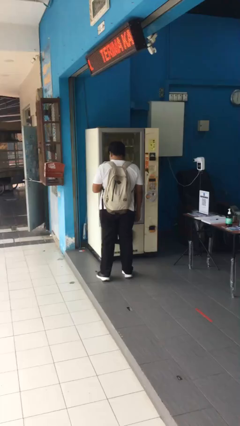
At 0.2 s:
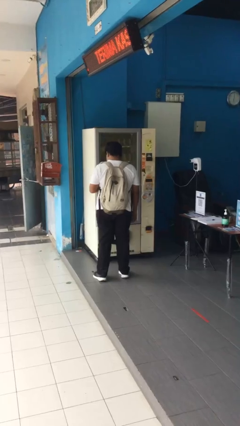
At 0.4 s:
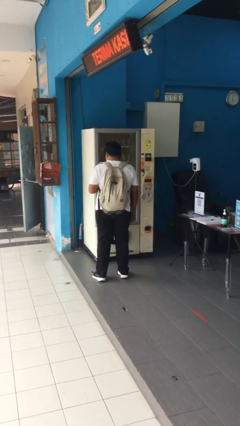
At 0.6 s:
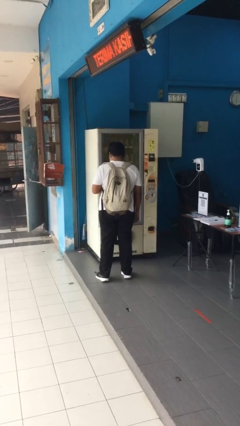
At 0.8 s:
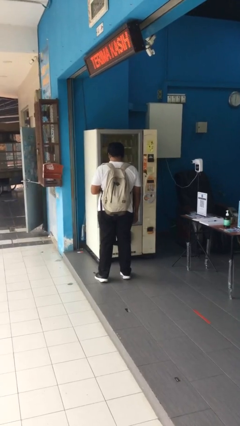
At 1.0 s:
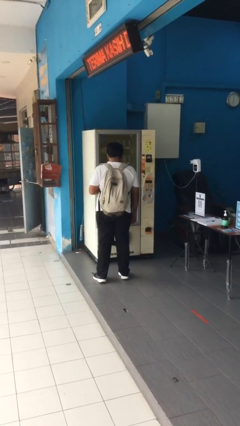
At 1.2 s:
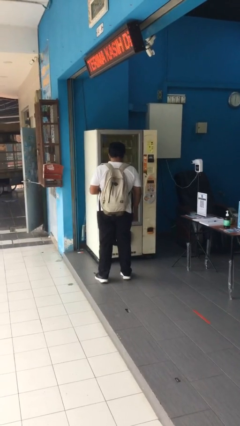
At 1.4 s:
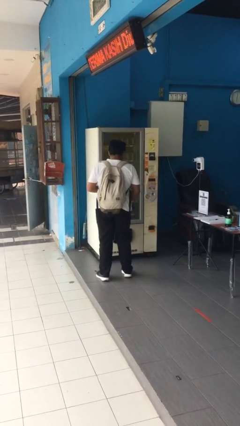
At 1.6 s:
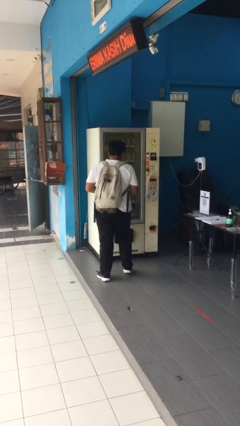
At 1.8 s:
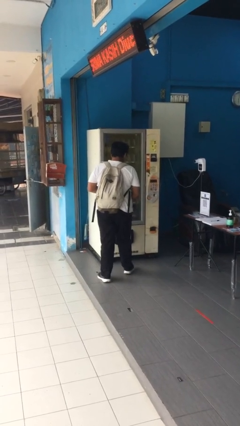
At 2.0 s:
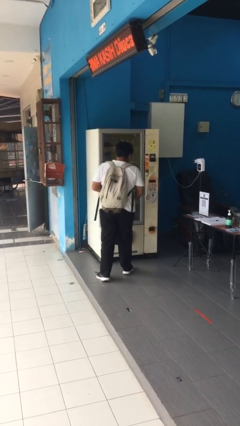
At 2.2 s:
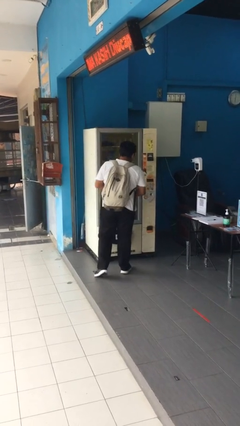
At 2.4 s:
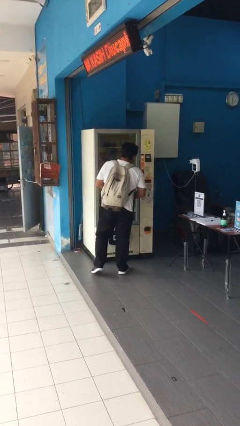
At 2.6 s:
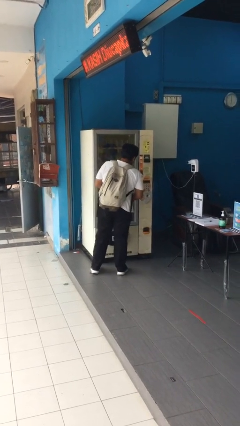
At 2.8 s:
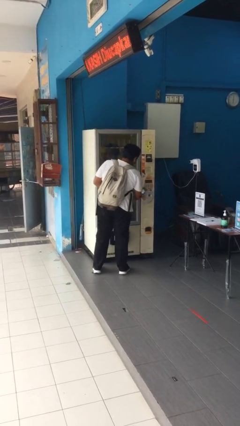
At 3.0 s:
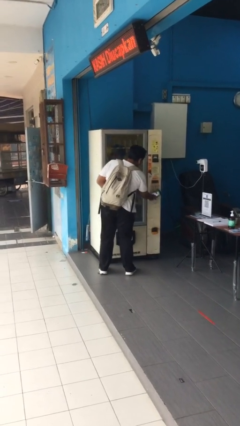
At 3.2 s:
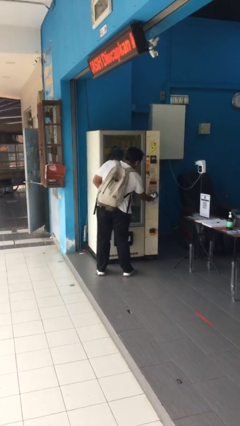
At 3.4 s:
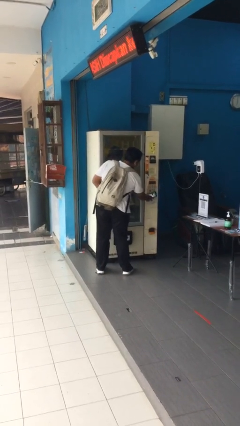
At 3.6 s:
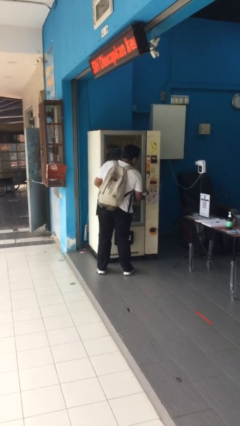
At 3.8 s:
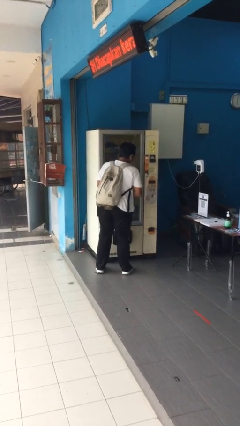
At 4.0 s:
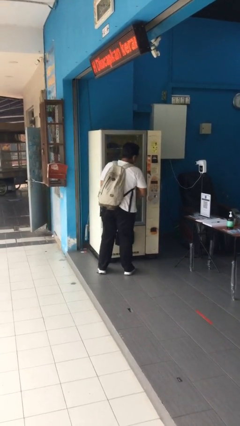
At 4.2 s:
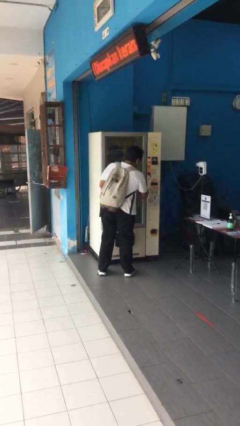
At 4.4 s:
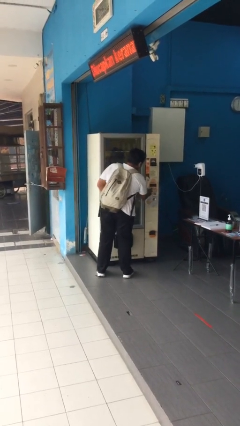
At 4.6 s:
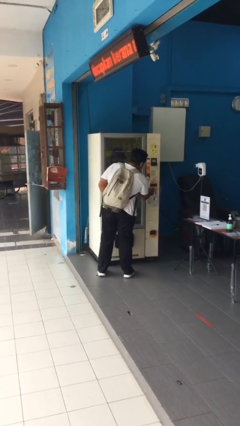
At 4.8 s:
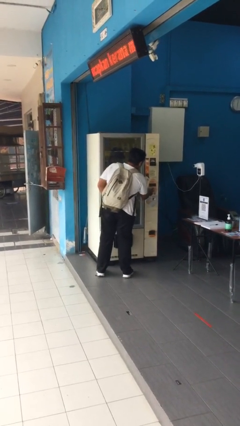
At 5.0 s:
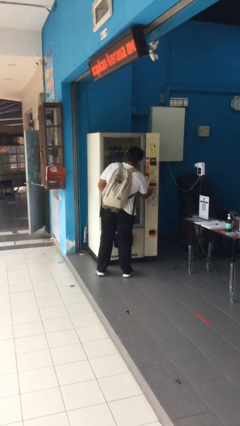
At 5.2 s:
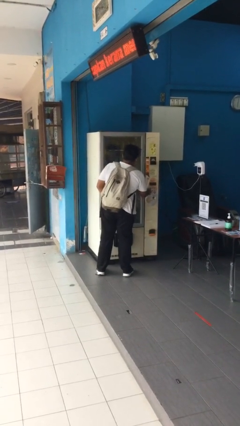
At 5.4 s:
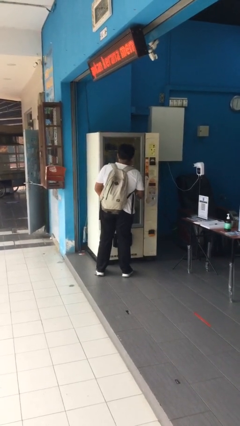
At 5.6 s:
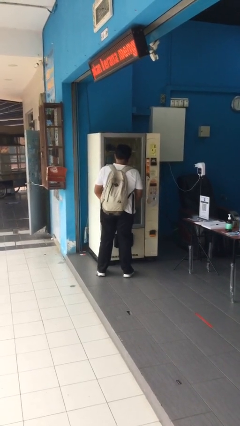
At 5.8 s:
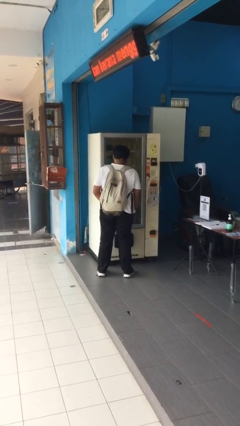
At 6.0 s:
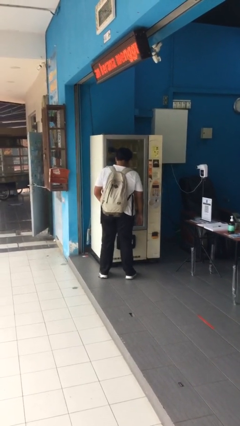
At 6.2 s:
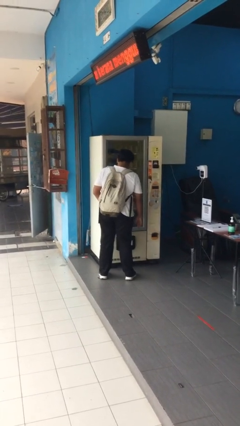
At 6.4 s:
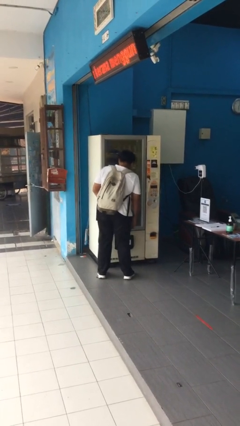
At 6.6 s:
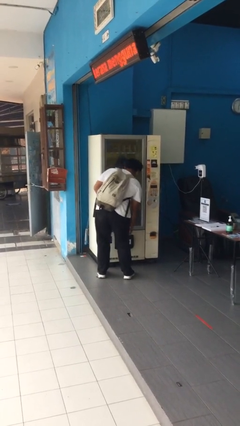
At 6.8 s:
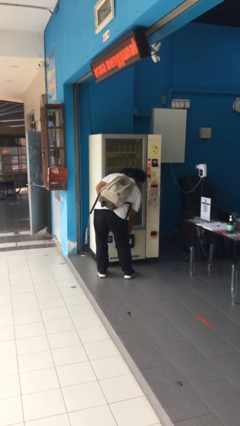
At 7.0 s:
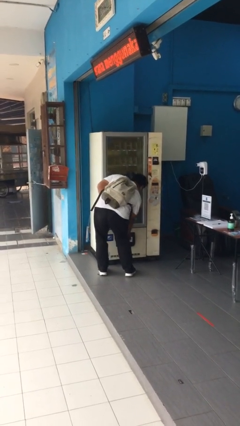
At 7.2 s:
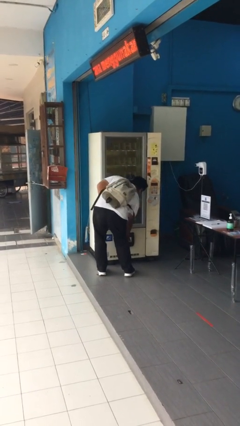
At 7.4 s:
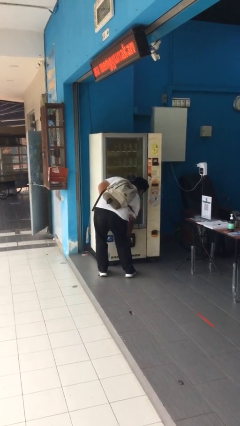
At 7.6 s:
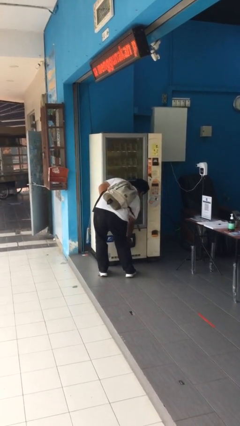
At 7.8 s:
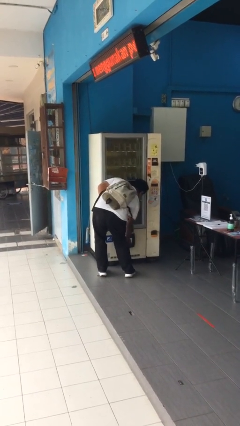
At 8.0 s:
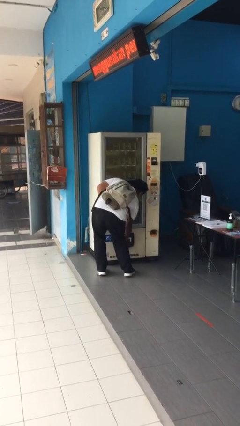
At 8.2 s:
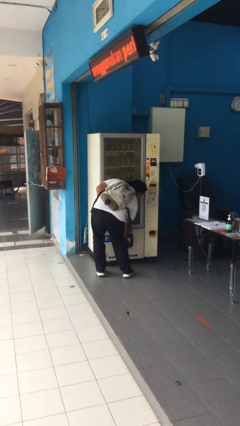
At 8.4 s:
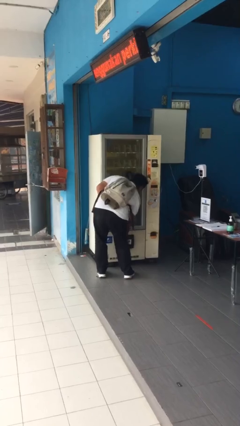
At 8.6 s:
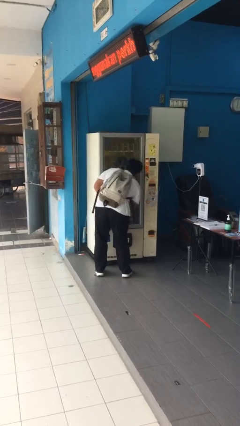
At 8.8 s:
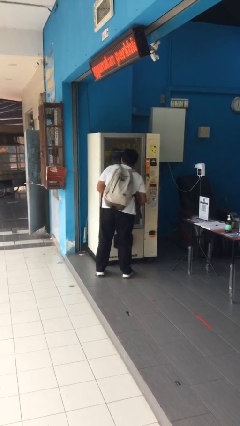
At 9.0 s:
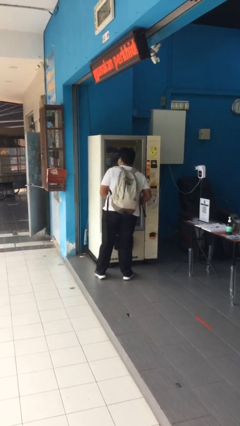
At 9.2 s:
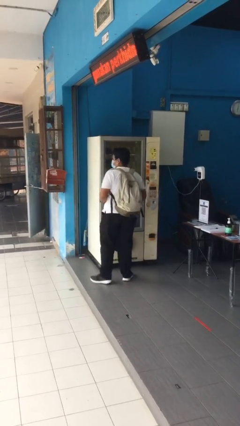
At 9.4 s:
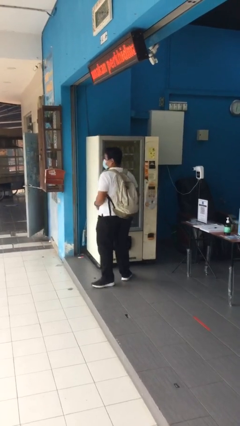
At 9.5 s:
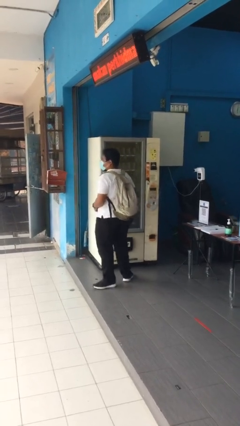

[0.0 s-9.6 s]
person purchases from machine

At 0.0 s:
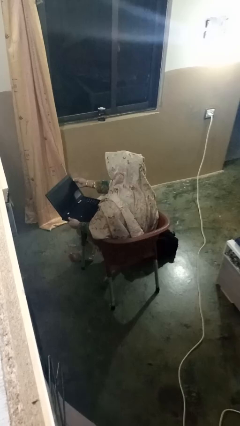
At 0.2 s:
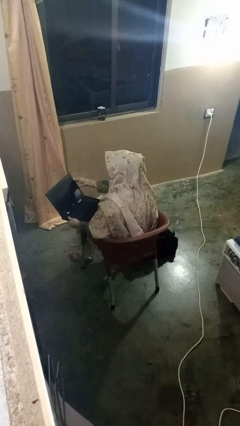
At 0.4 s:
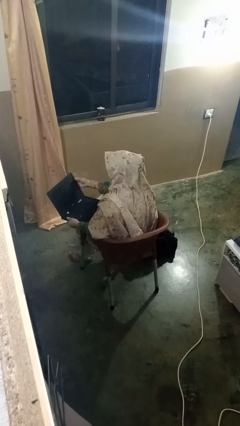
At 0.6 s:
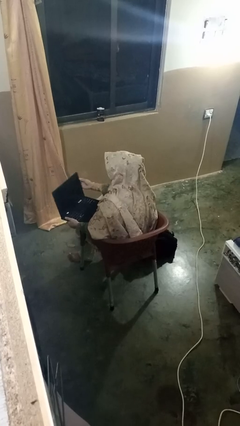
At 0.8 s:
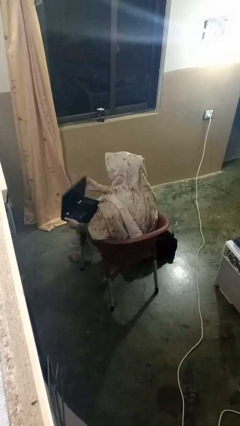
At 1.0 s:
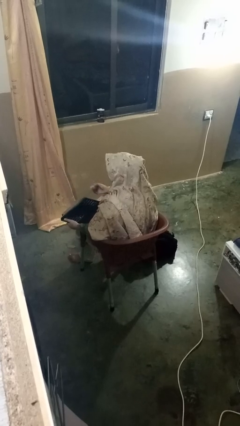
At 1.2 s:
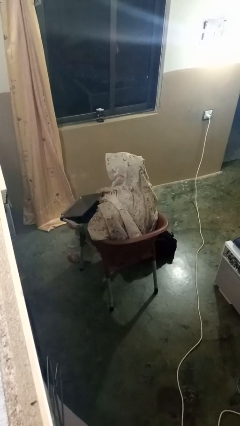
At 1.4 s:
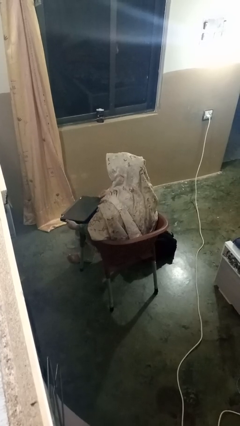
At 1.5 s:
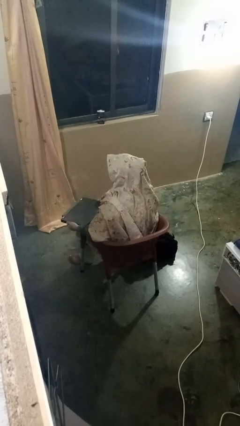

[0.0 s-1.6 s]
person closes laptop

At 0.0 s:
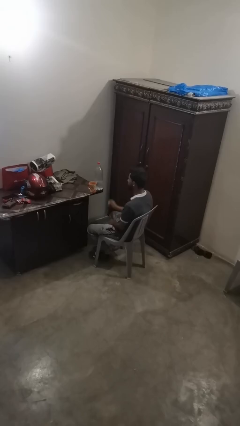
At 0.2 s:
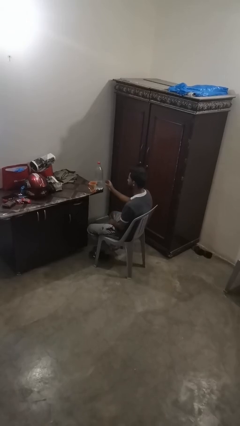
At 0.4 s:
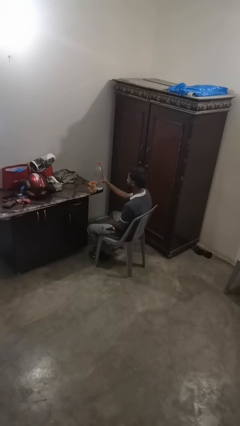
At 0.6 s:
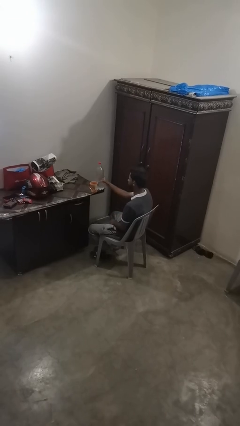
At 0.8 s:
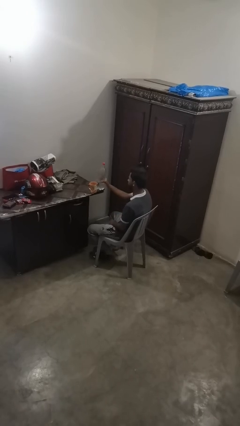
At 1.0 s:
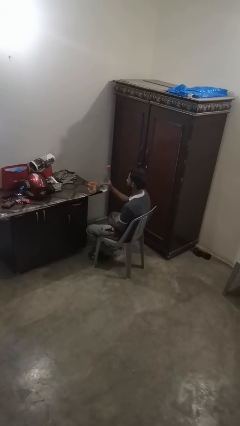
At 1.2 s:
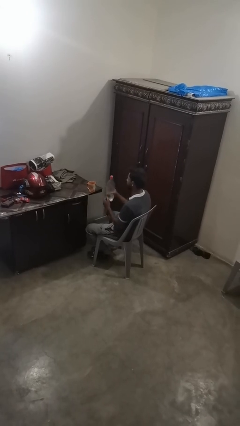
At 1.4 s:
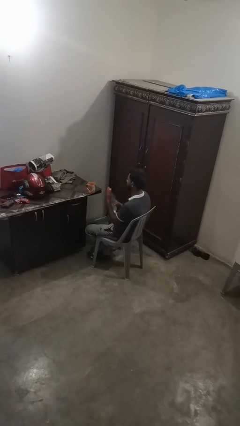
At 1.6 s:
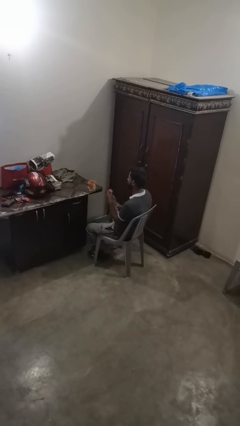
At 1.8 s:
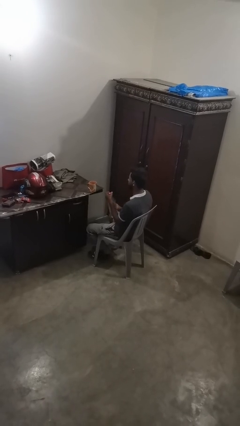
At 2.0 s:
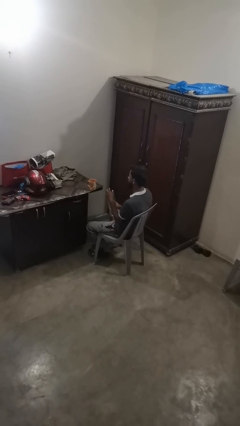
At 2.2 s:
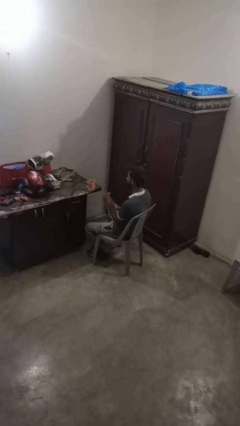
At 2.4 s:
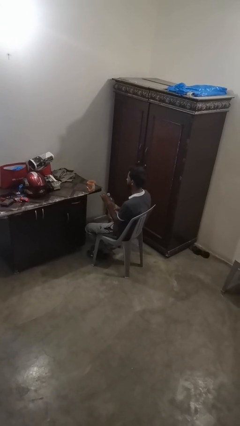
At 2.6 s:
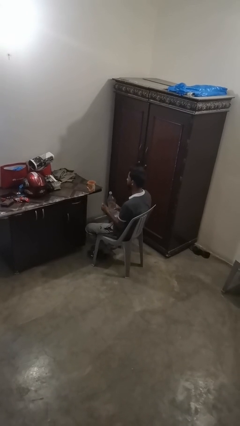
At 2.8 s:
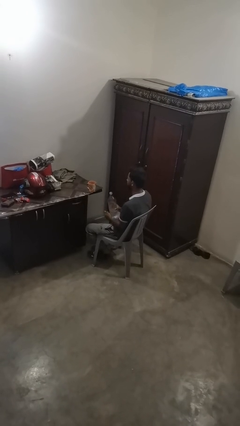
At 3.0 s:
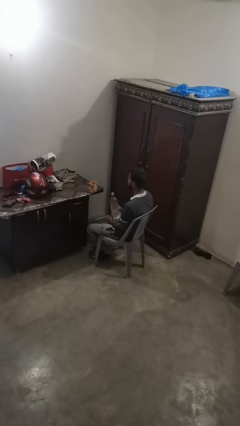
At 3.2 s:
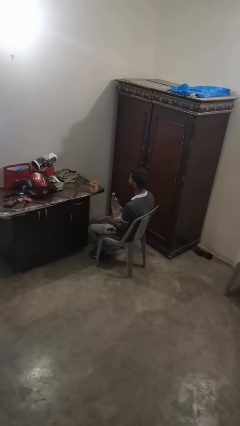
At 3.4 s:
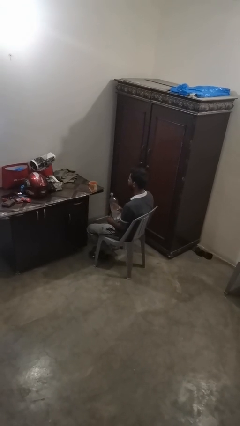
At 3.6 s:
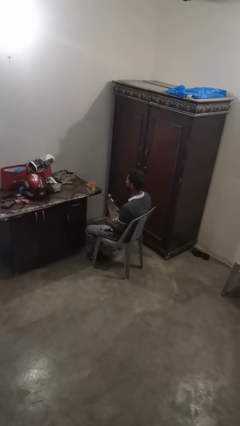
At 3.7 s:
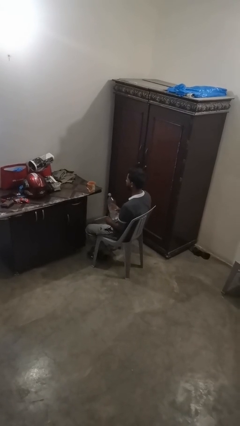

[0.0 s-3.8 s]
person unscrews lid from bottle

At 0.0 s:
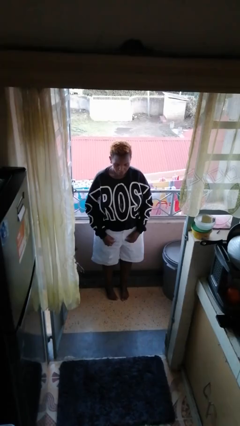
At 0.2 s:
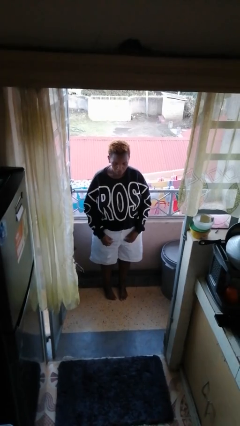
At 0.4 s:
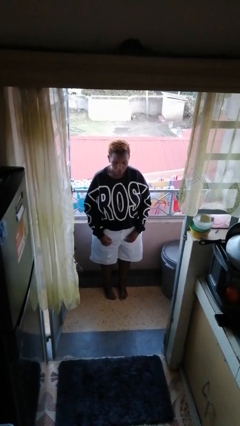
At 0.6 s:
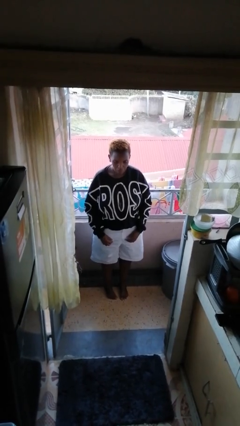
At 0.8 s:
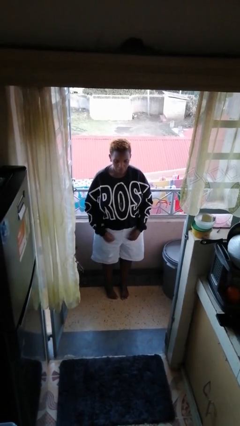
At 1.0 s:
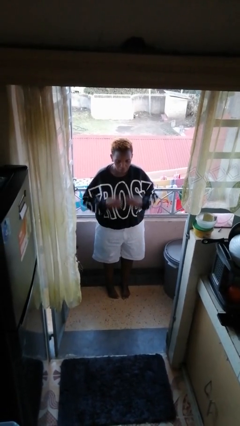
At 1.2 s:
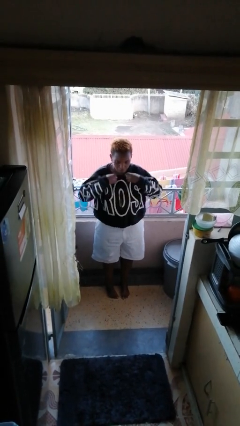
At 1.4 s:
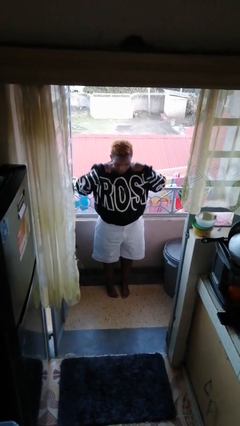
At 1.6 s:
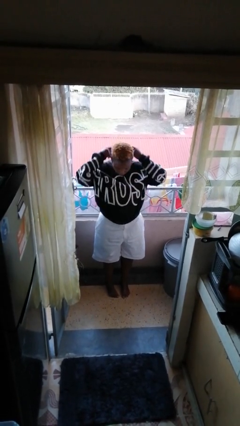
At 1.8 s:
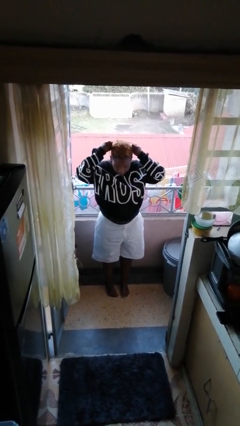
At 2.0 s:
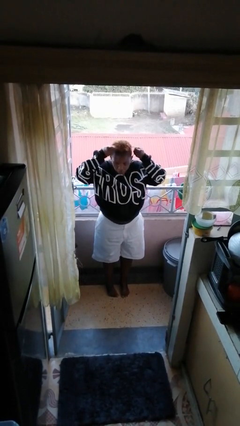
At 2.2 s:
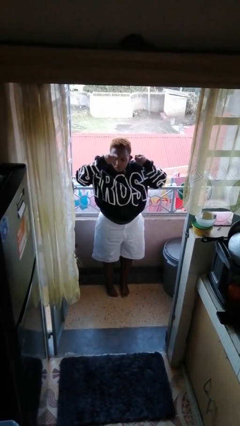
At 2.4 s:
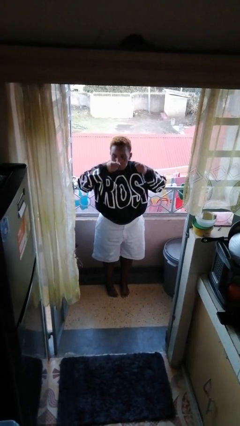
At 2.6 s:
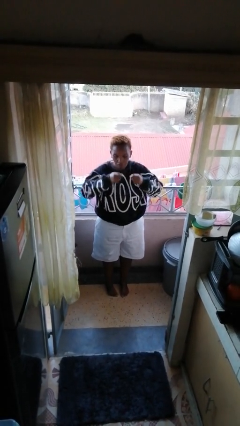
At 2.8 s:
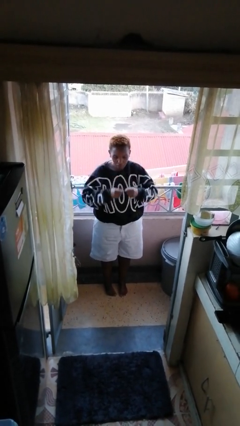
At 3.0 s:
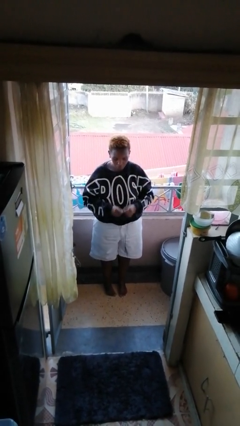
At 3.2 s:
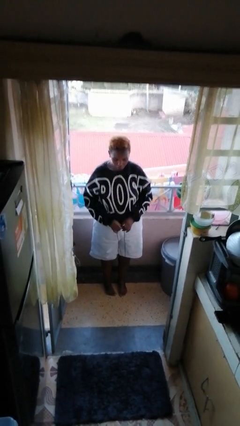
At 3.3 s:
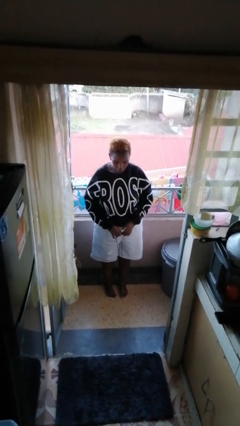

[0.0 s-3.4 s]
person takes off necklace
